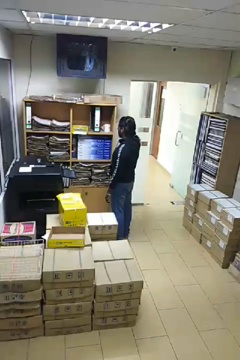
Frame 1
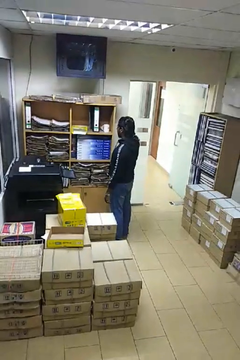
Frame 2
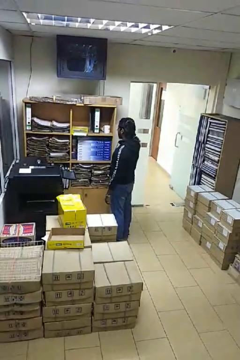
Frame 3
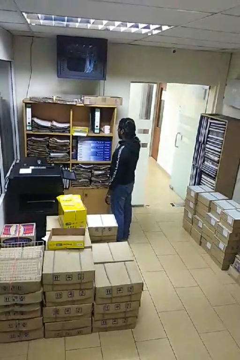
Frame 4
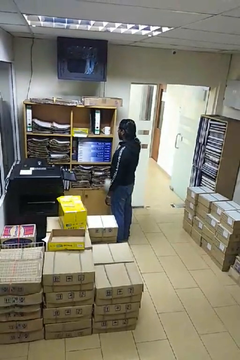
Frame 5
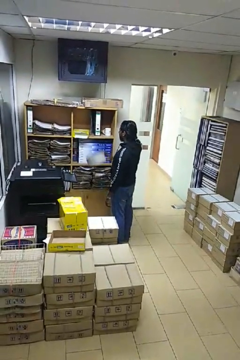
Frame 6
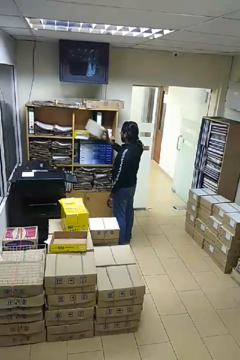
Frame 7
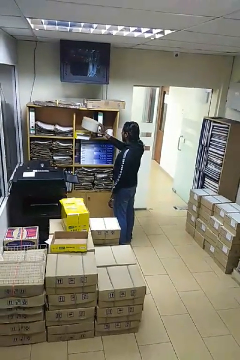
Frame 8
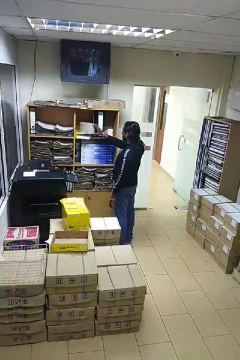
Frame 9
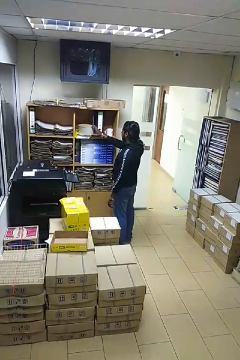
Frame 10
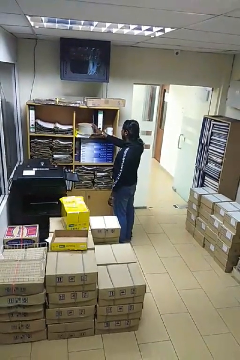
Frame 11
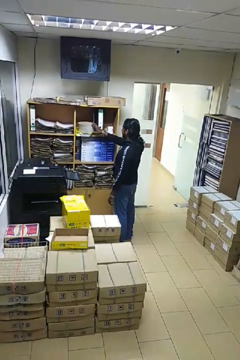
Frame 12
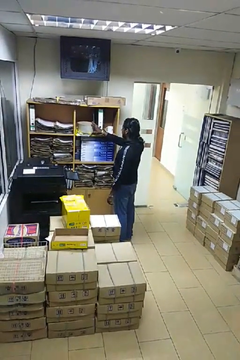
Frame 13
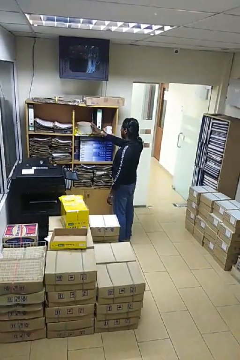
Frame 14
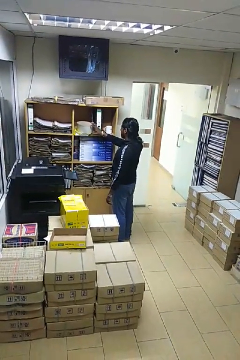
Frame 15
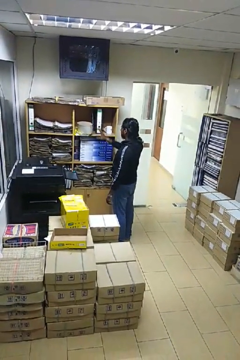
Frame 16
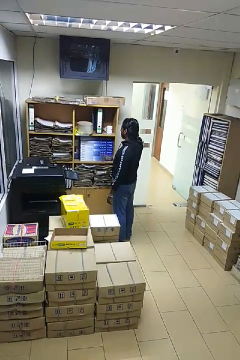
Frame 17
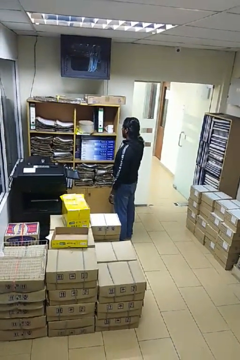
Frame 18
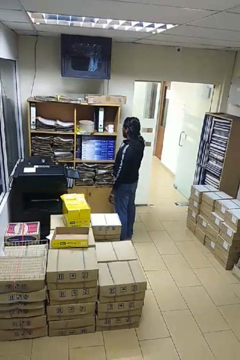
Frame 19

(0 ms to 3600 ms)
person puts down object into cabinet

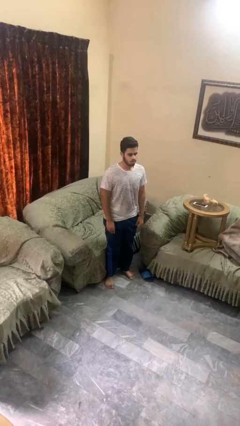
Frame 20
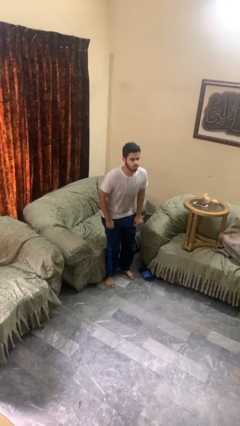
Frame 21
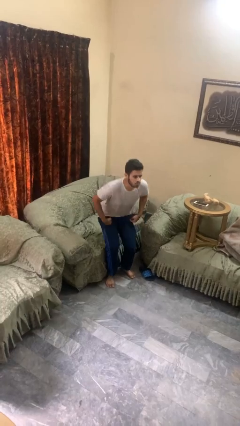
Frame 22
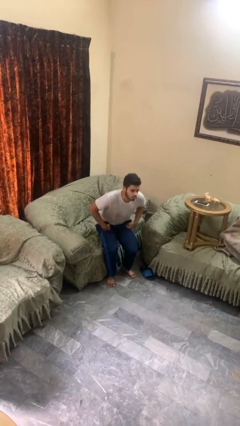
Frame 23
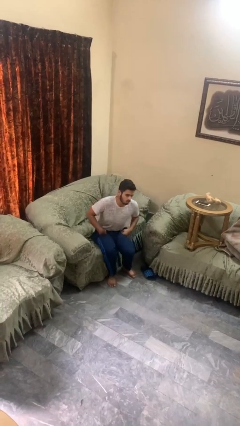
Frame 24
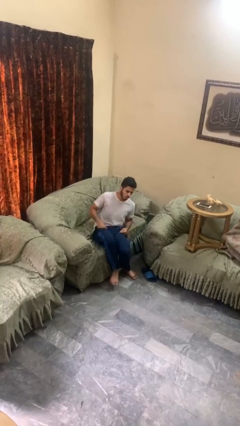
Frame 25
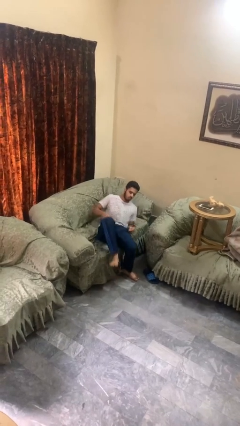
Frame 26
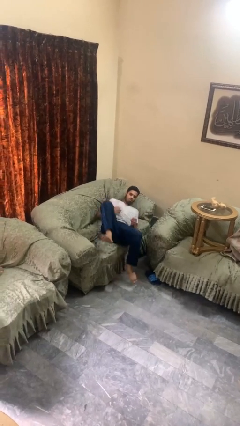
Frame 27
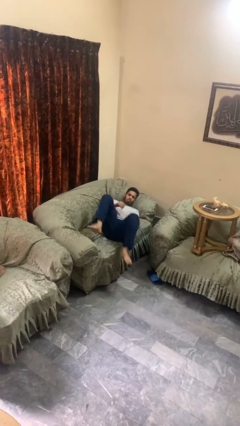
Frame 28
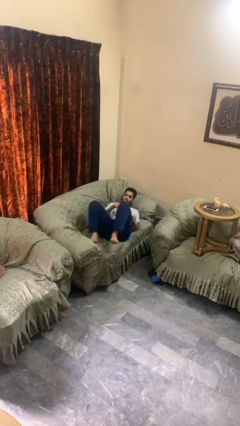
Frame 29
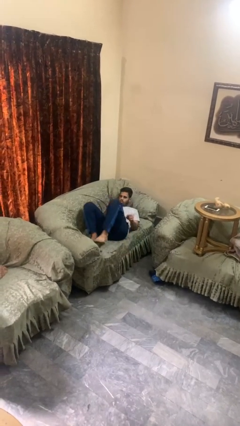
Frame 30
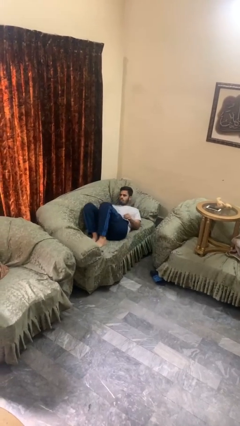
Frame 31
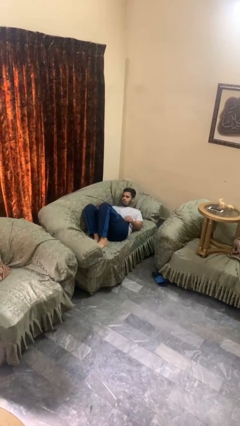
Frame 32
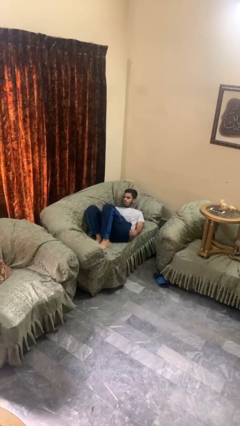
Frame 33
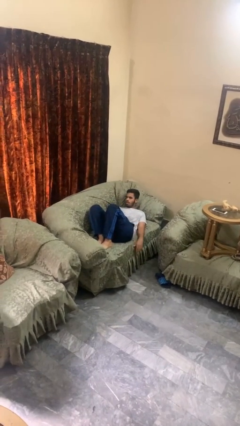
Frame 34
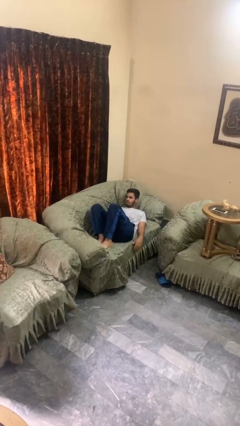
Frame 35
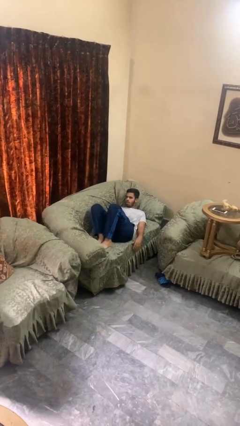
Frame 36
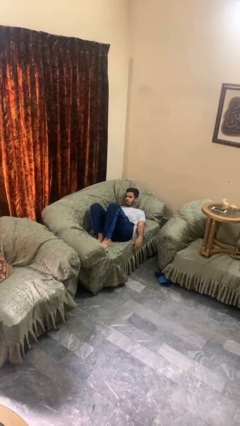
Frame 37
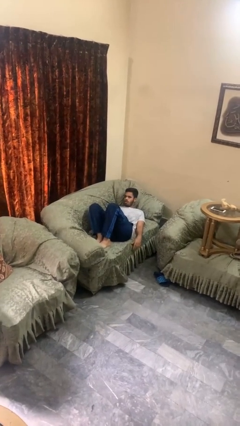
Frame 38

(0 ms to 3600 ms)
person lies down on couch

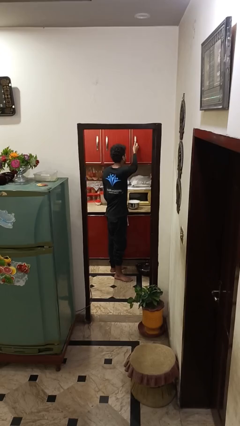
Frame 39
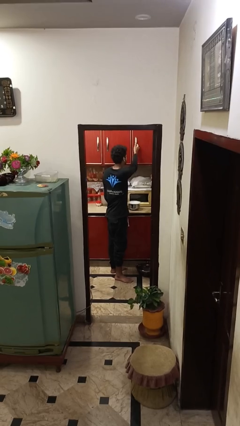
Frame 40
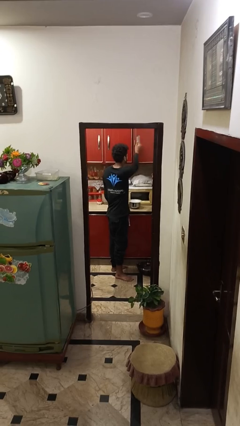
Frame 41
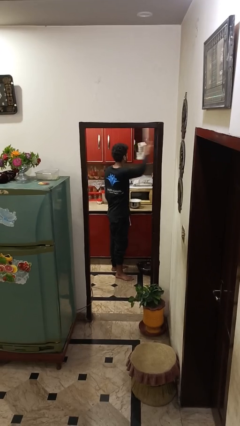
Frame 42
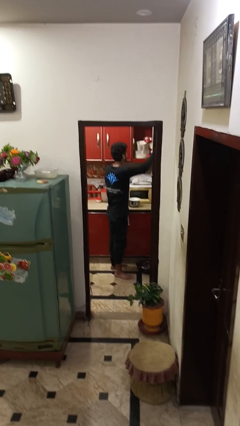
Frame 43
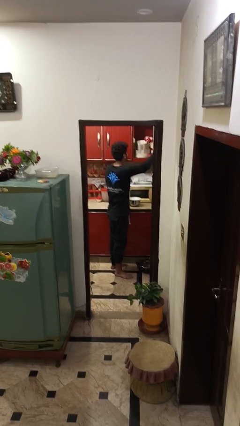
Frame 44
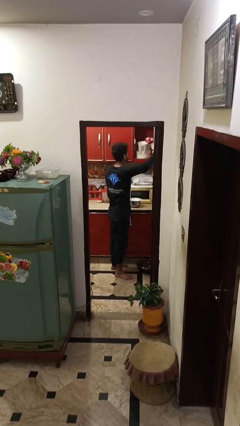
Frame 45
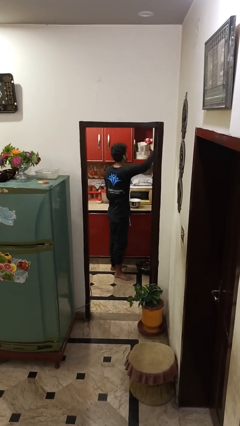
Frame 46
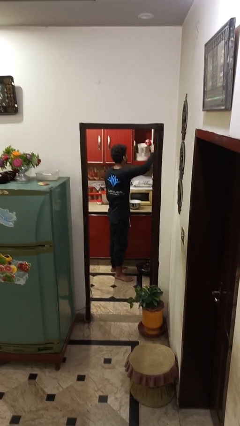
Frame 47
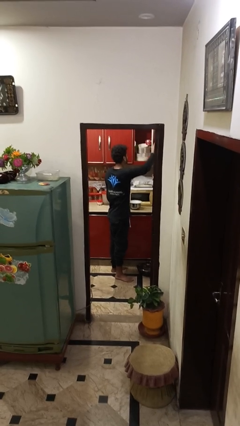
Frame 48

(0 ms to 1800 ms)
person opens cabinet

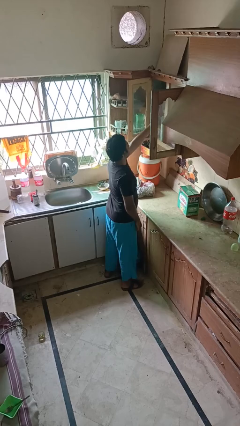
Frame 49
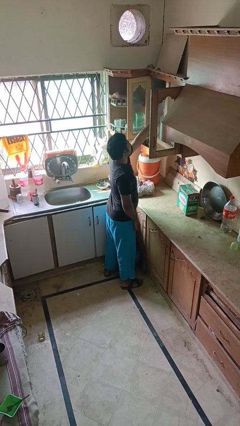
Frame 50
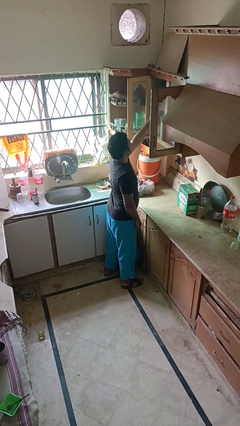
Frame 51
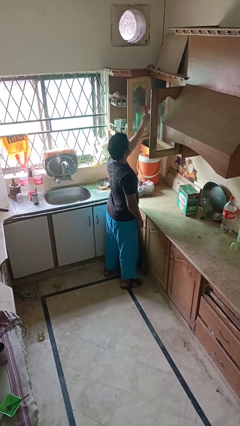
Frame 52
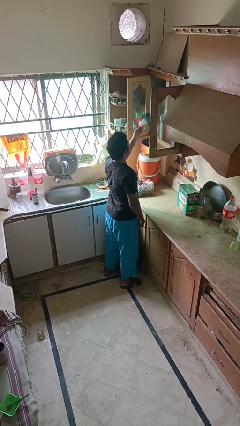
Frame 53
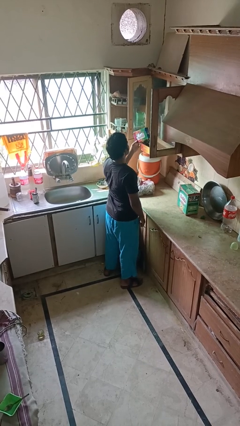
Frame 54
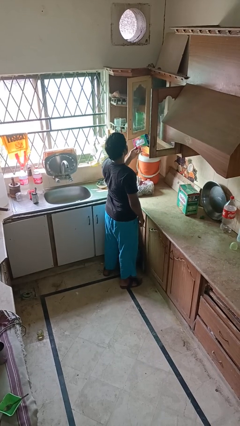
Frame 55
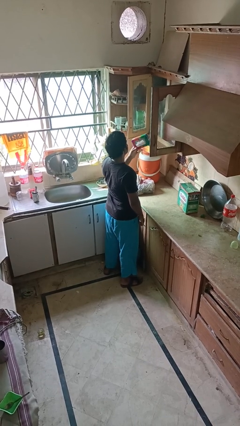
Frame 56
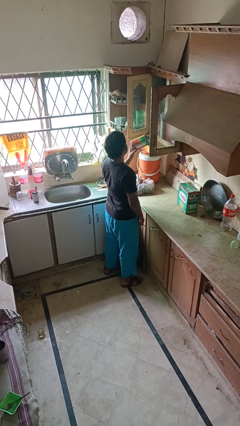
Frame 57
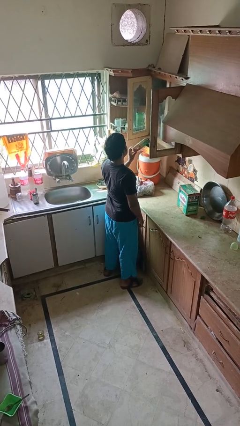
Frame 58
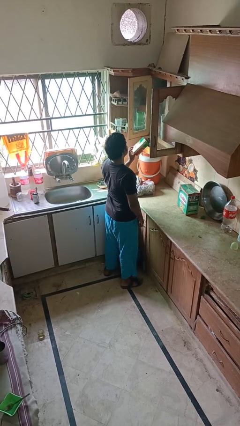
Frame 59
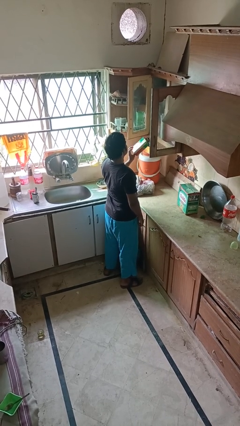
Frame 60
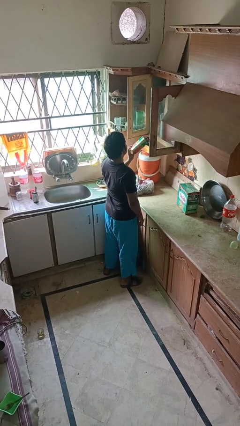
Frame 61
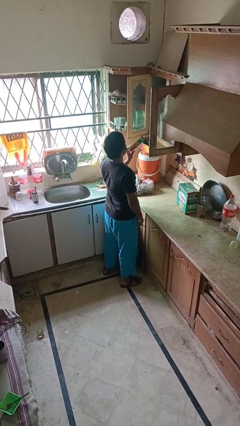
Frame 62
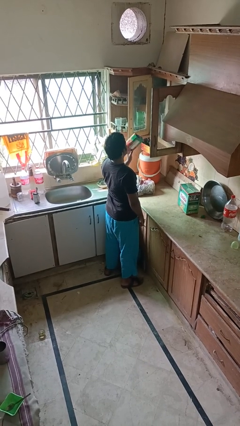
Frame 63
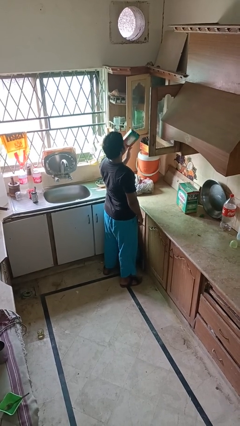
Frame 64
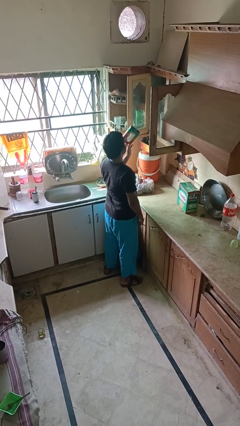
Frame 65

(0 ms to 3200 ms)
person picks up object from cabinet

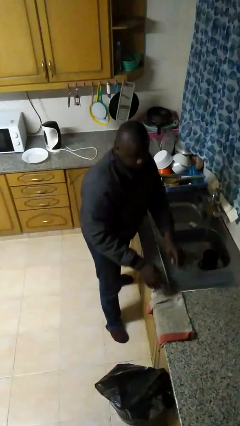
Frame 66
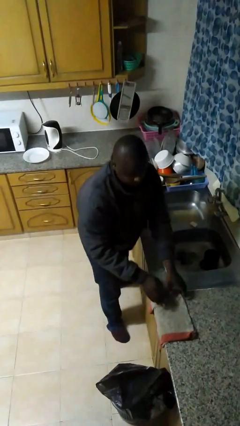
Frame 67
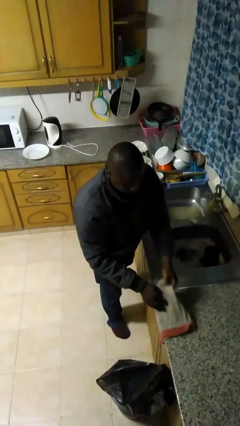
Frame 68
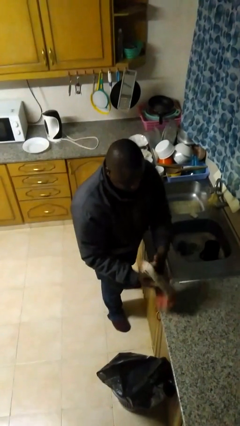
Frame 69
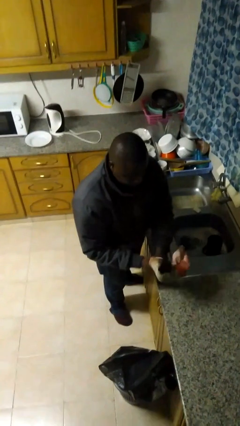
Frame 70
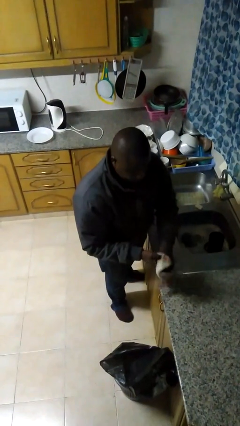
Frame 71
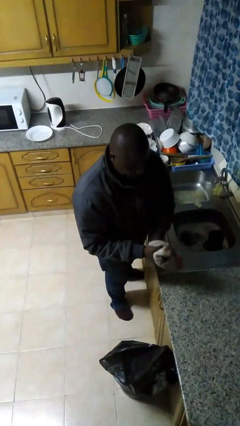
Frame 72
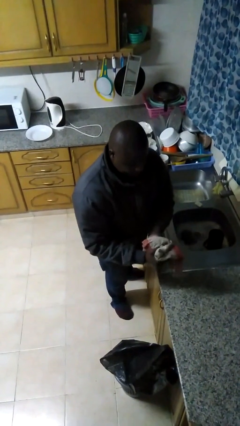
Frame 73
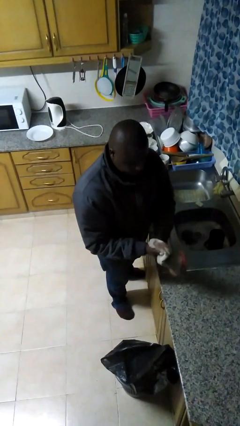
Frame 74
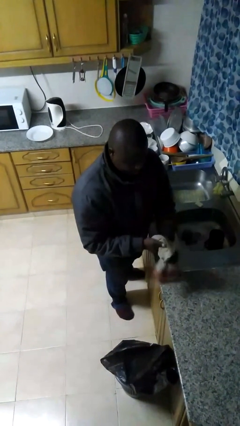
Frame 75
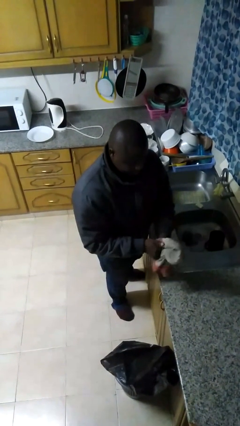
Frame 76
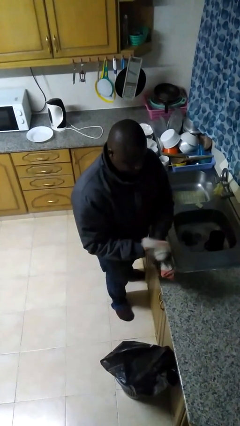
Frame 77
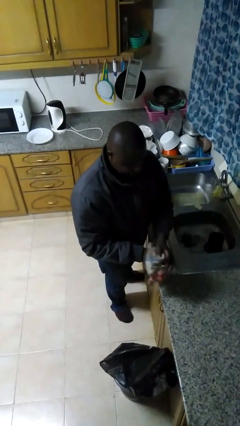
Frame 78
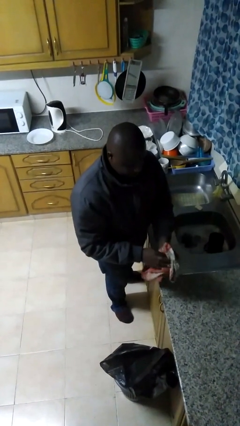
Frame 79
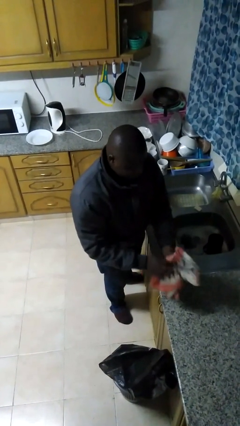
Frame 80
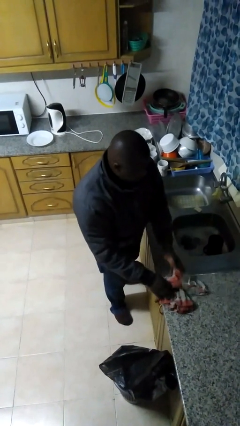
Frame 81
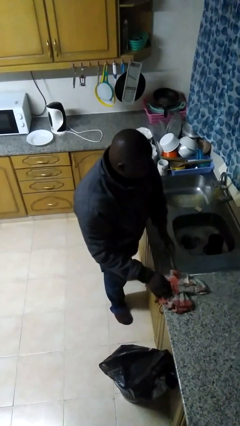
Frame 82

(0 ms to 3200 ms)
person dries hands with towel

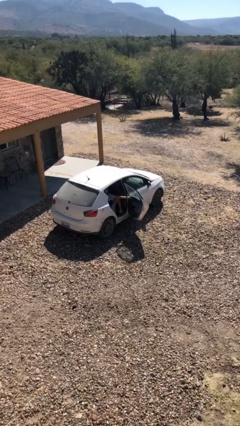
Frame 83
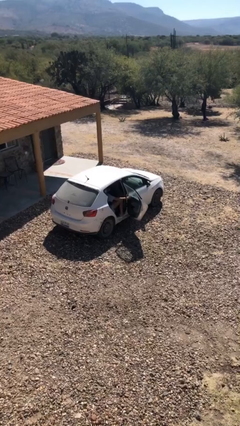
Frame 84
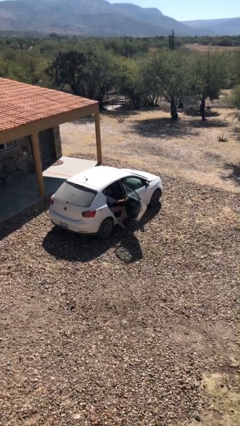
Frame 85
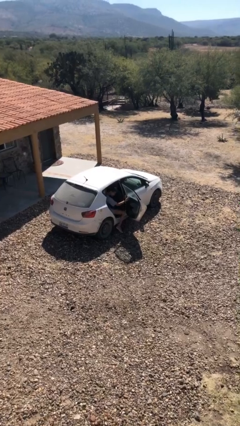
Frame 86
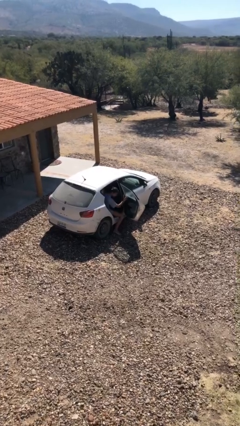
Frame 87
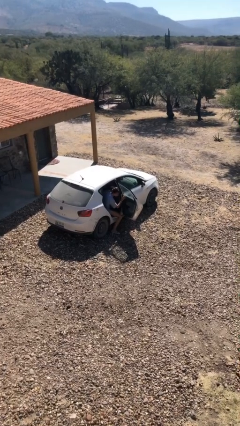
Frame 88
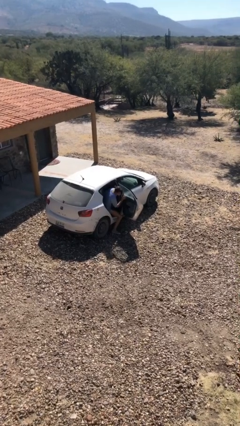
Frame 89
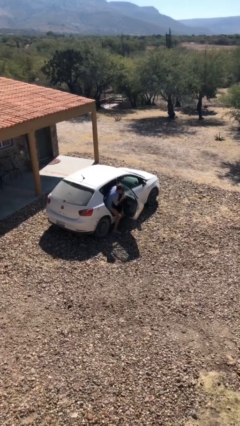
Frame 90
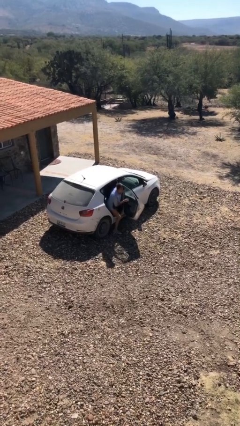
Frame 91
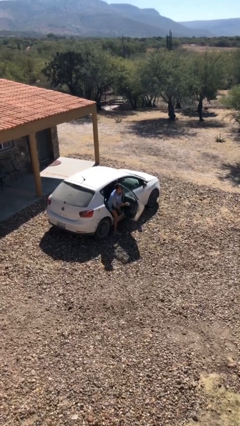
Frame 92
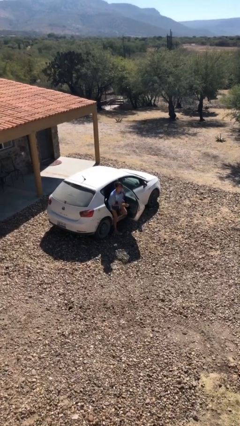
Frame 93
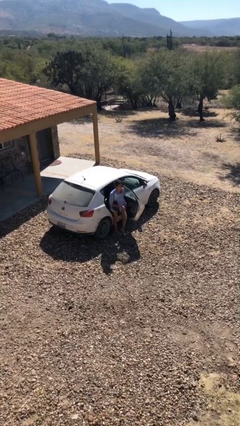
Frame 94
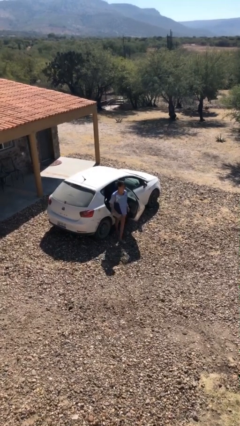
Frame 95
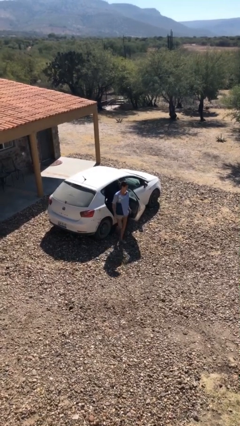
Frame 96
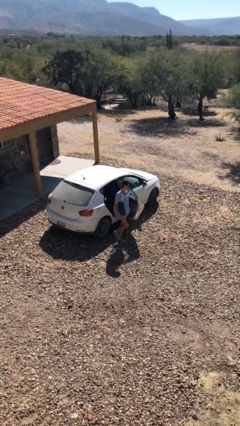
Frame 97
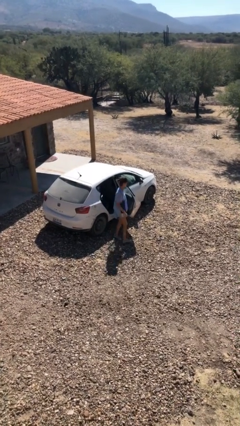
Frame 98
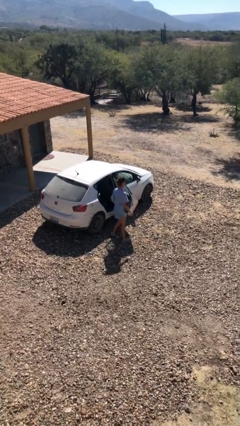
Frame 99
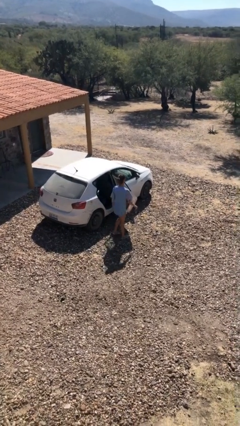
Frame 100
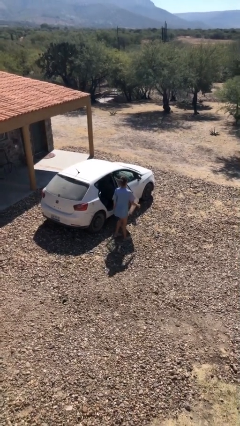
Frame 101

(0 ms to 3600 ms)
person exits car
